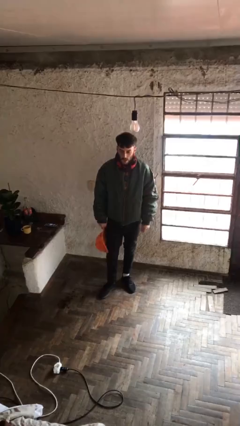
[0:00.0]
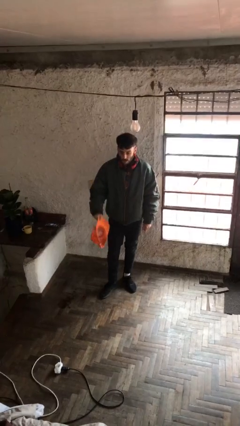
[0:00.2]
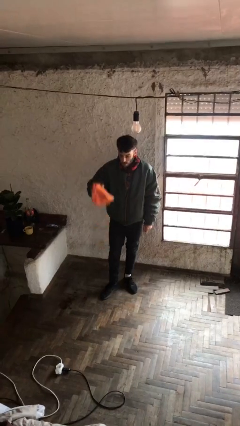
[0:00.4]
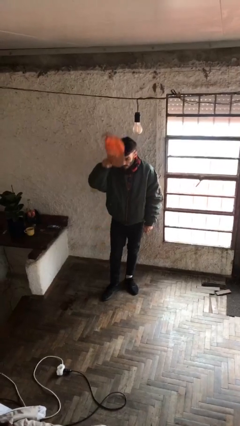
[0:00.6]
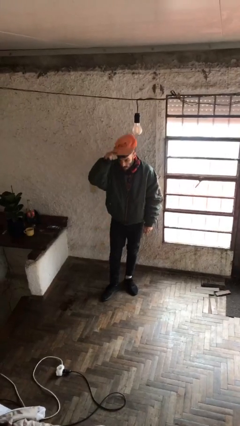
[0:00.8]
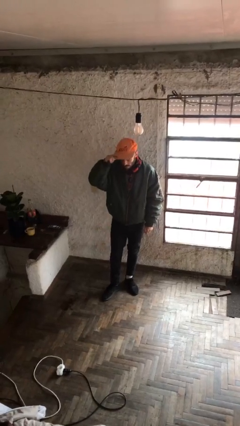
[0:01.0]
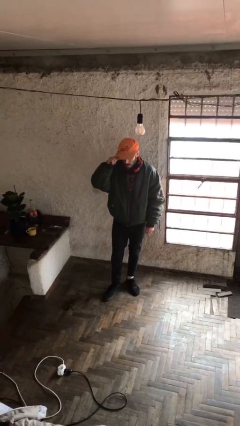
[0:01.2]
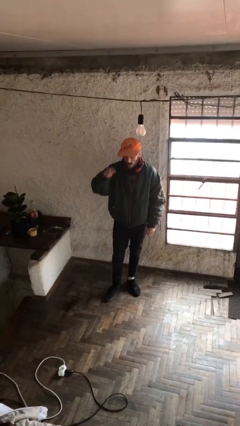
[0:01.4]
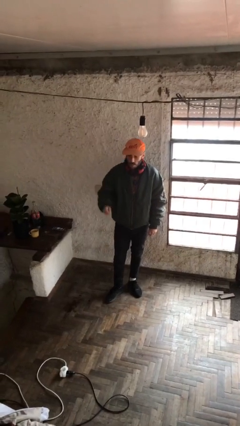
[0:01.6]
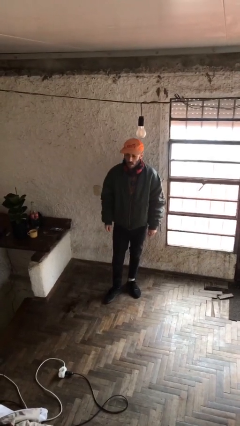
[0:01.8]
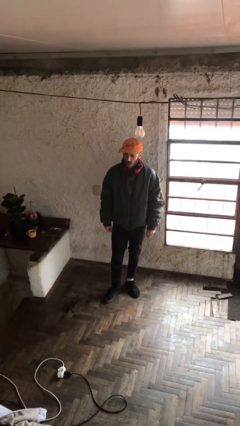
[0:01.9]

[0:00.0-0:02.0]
person puts on hat

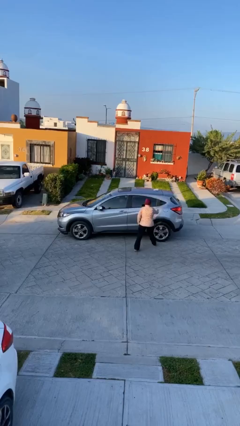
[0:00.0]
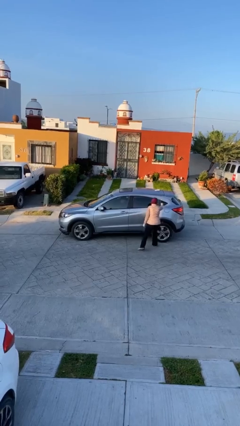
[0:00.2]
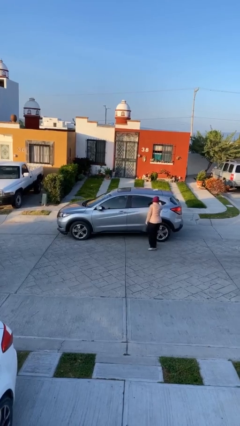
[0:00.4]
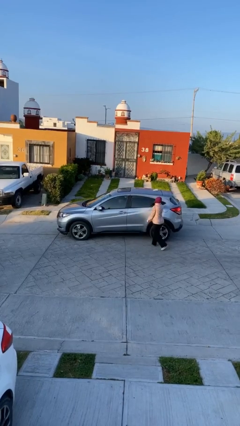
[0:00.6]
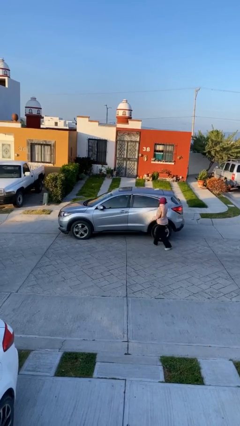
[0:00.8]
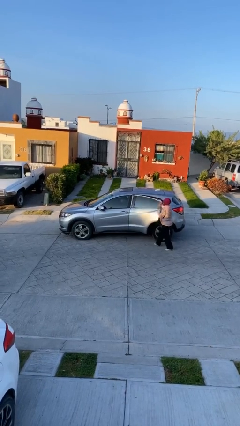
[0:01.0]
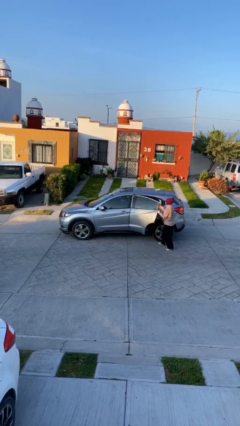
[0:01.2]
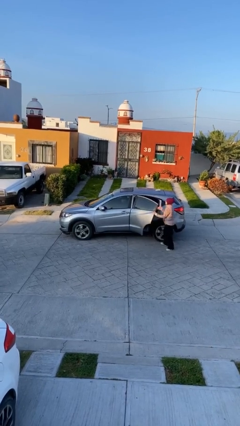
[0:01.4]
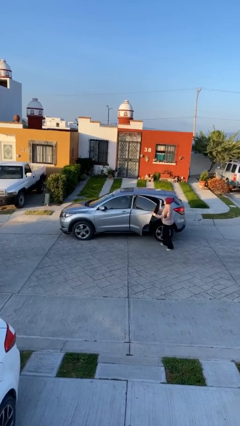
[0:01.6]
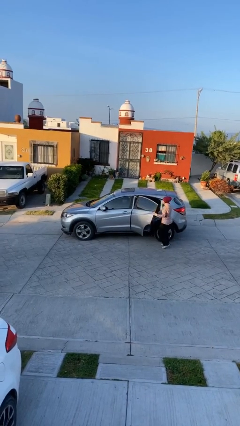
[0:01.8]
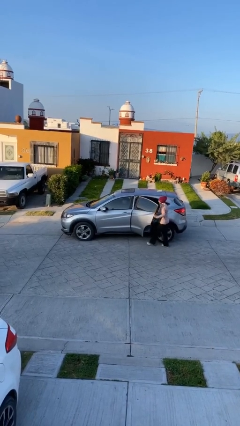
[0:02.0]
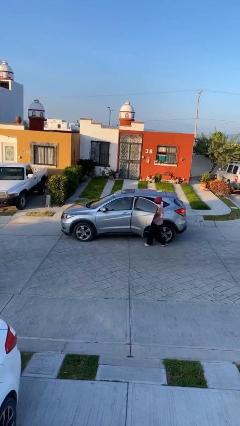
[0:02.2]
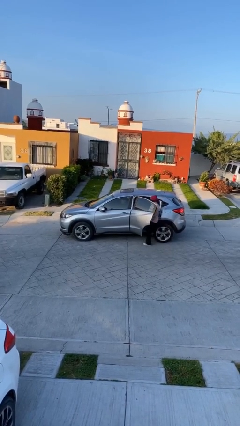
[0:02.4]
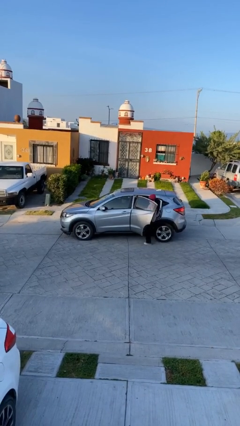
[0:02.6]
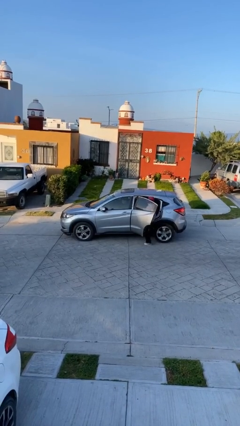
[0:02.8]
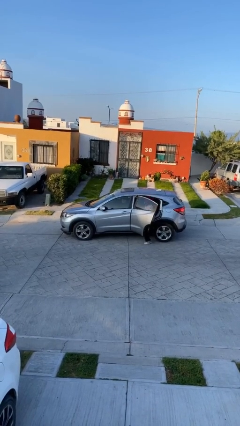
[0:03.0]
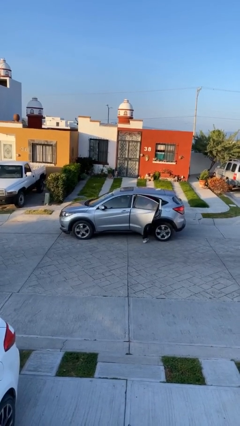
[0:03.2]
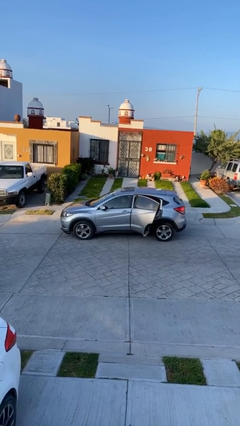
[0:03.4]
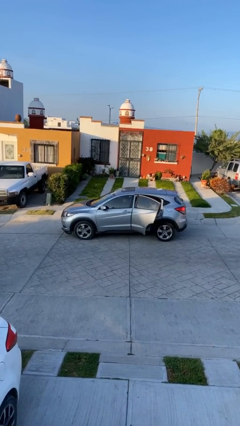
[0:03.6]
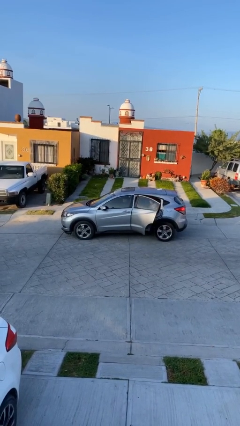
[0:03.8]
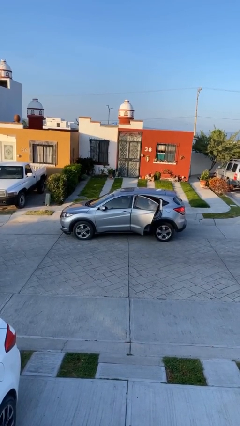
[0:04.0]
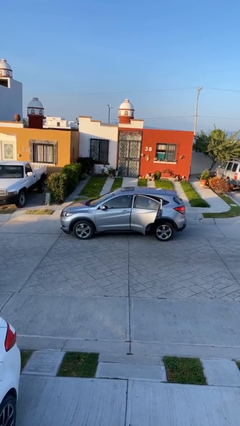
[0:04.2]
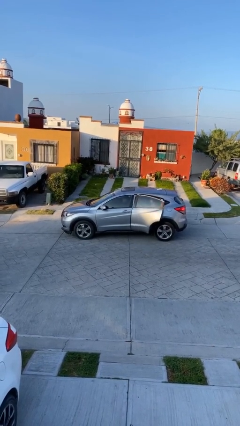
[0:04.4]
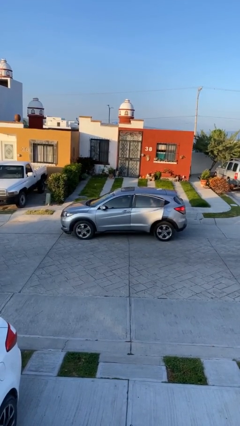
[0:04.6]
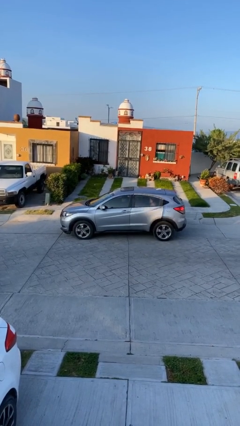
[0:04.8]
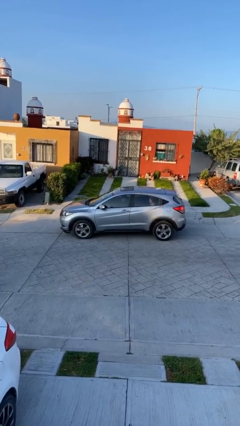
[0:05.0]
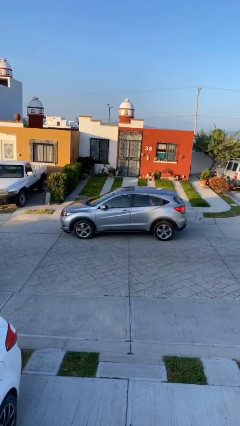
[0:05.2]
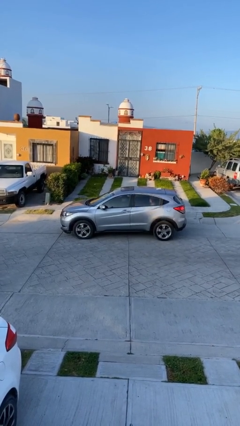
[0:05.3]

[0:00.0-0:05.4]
car picks up person

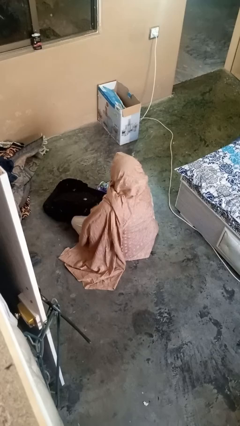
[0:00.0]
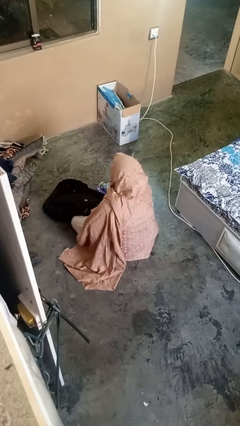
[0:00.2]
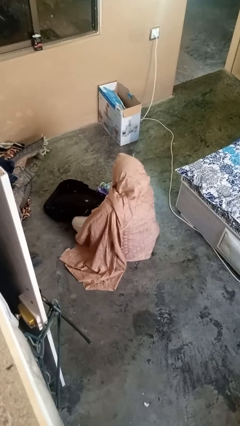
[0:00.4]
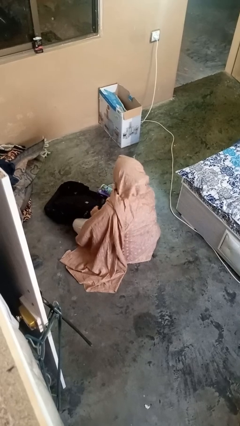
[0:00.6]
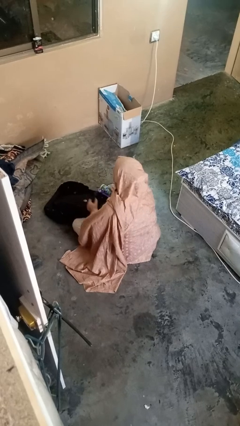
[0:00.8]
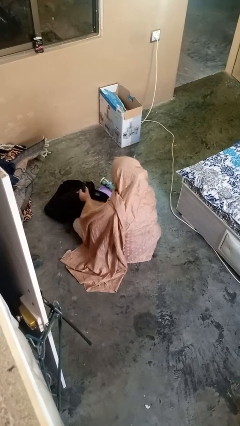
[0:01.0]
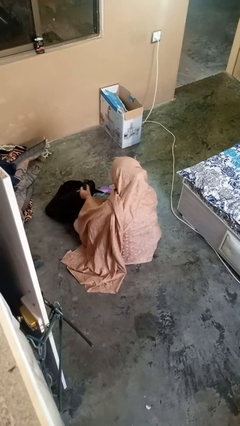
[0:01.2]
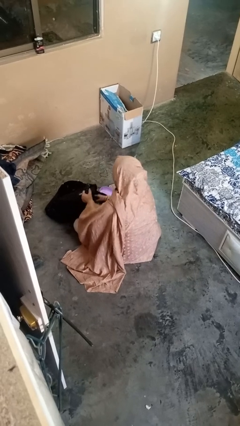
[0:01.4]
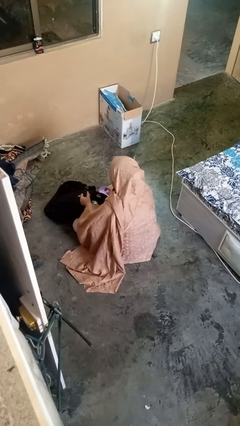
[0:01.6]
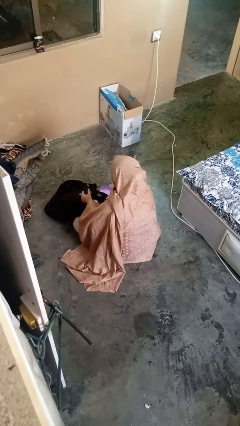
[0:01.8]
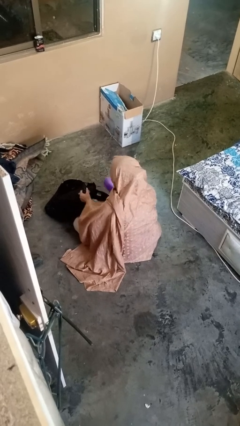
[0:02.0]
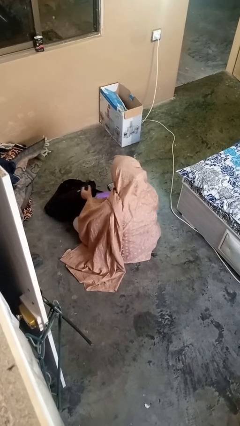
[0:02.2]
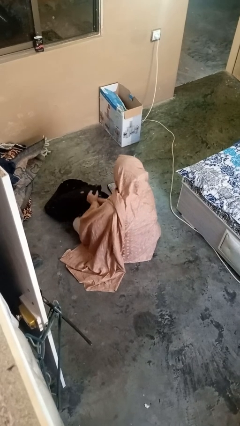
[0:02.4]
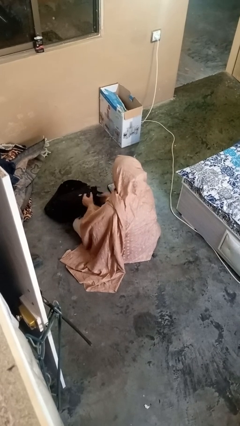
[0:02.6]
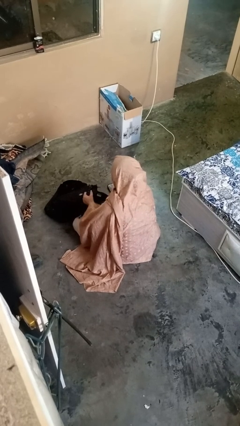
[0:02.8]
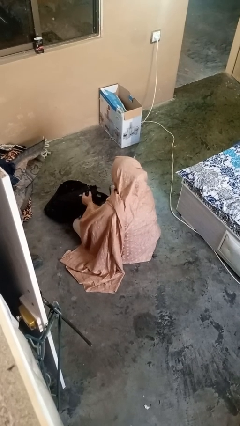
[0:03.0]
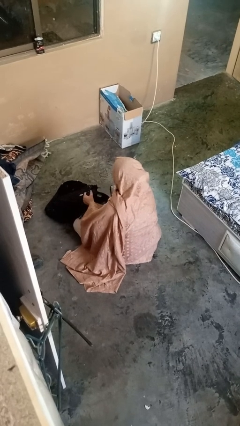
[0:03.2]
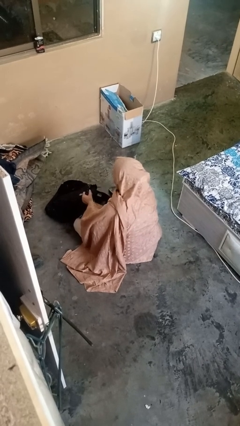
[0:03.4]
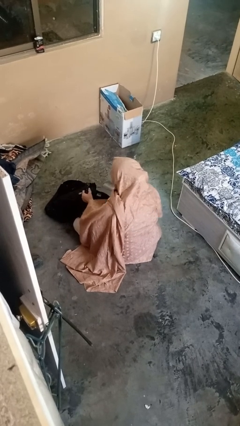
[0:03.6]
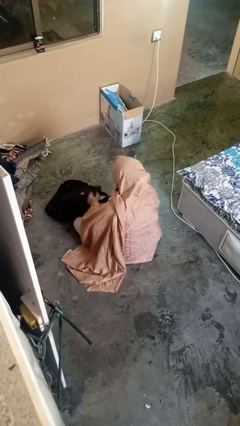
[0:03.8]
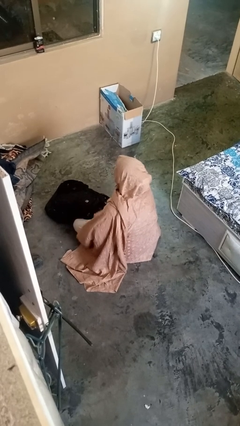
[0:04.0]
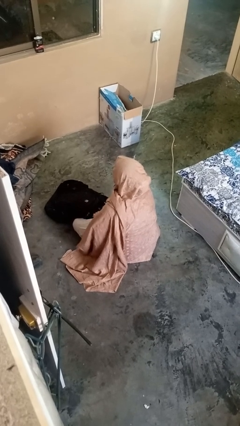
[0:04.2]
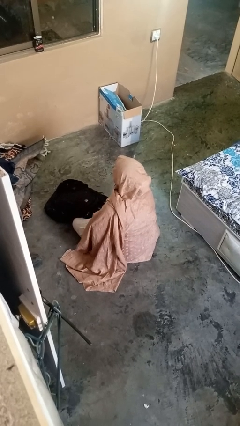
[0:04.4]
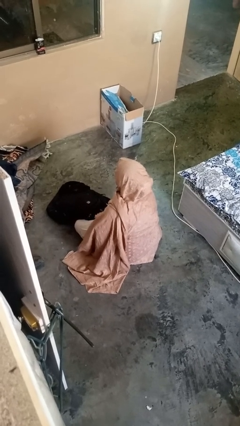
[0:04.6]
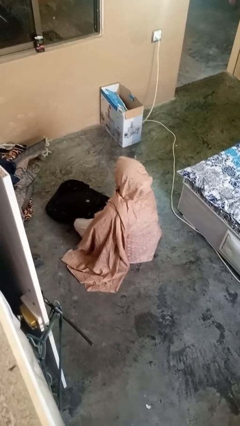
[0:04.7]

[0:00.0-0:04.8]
person puts object into backpack

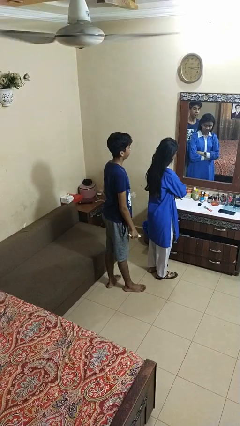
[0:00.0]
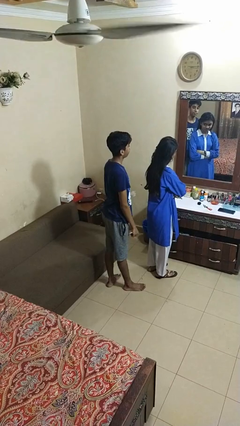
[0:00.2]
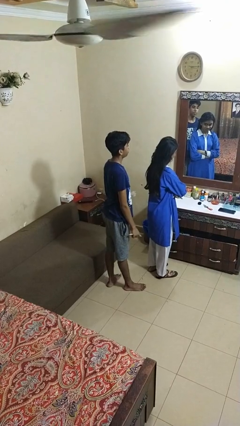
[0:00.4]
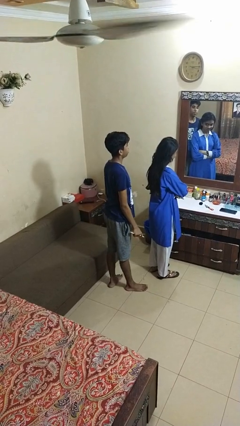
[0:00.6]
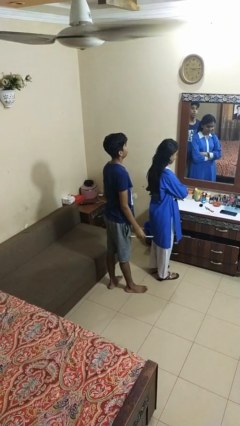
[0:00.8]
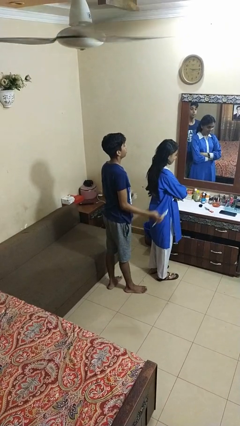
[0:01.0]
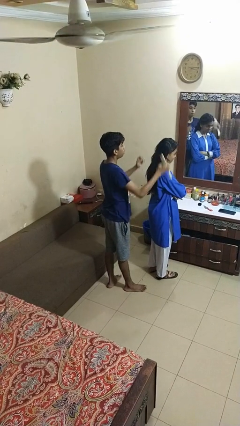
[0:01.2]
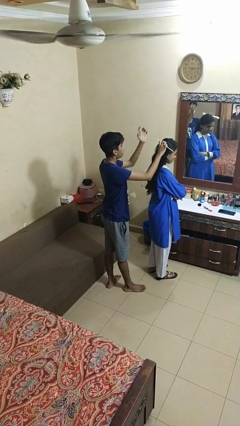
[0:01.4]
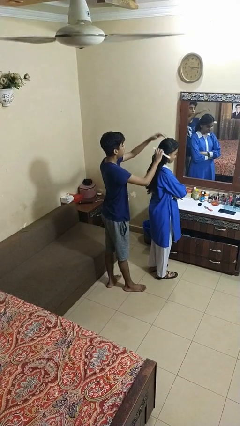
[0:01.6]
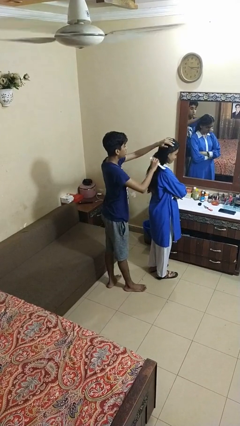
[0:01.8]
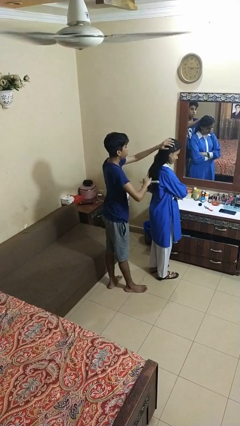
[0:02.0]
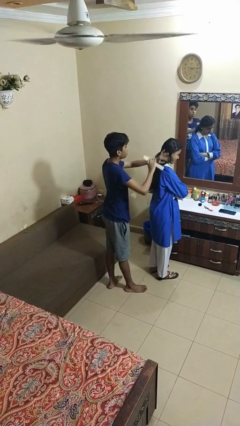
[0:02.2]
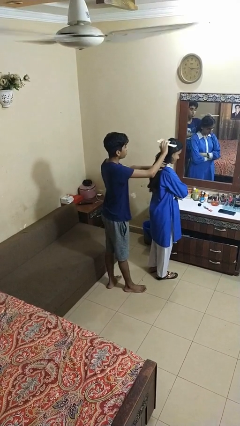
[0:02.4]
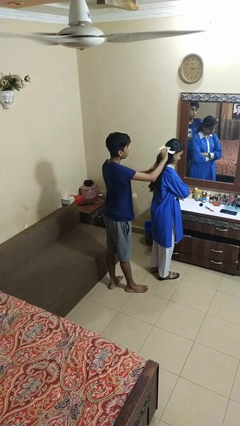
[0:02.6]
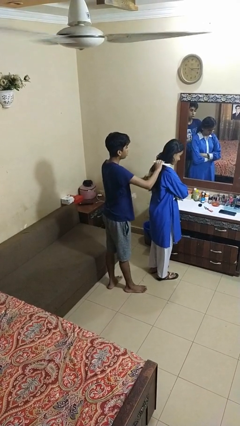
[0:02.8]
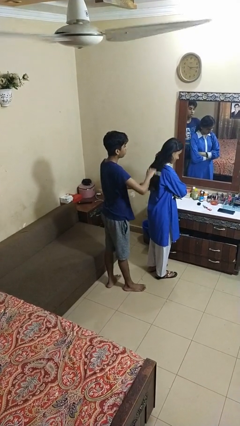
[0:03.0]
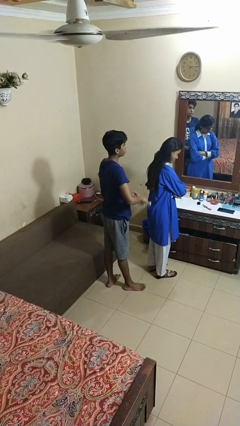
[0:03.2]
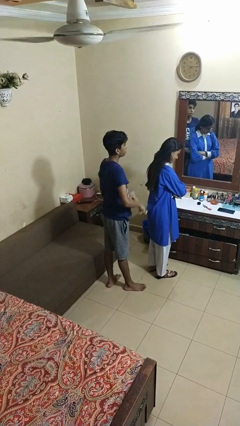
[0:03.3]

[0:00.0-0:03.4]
person brushes hair of person

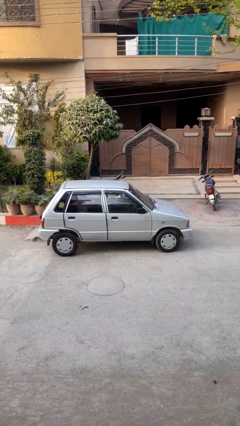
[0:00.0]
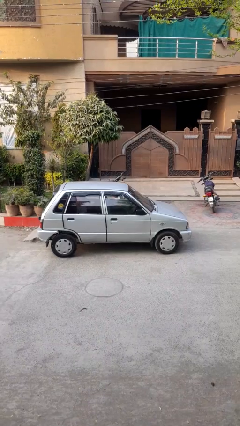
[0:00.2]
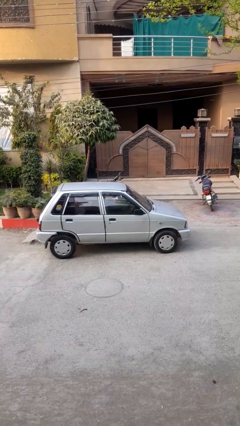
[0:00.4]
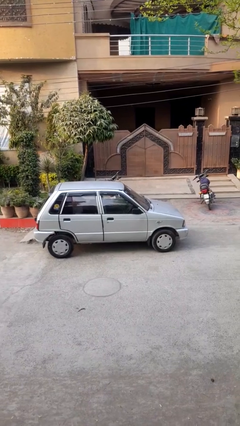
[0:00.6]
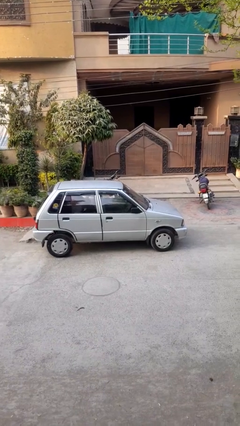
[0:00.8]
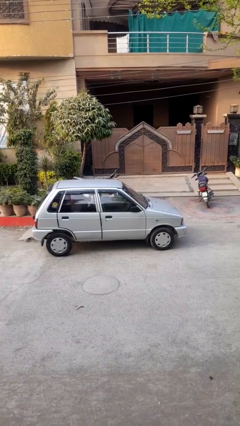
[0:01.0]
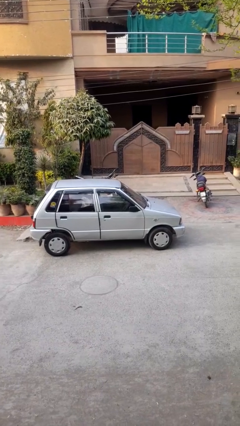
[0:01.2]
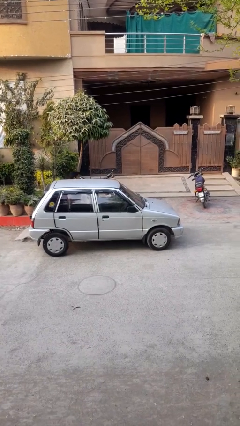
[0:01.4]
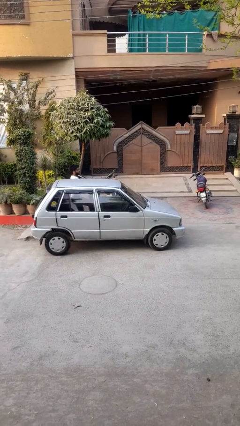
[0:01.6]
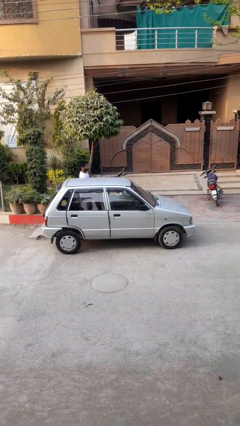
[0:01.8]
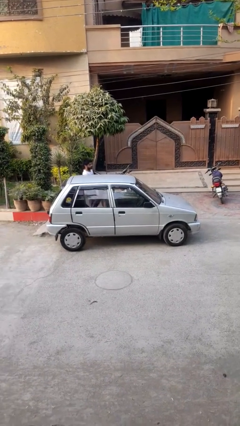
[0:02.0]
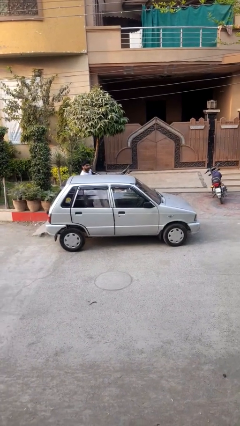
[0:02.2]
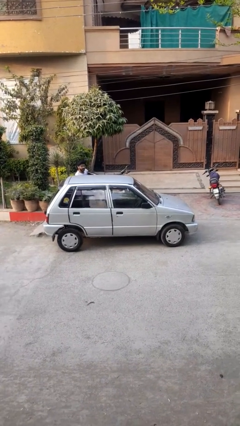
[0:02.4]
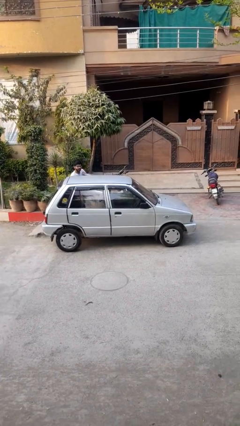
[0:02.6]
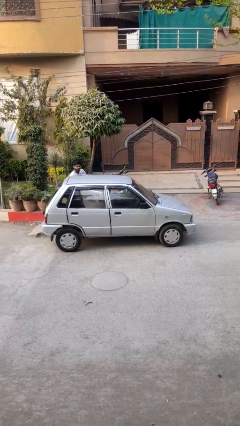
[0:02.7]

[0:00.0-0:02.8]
car drops off person
